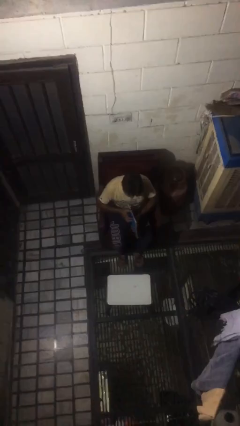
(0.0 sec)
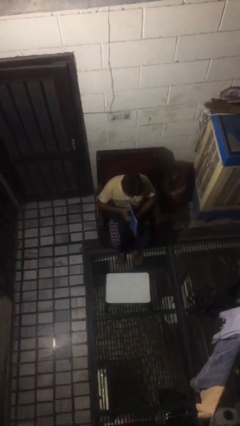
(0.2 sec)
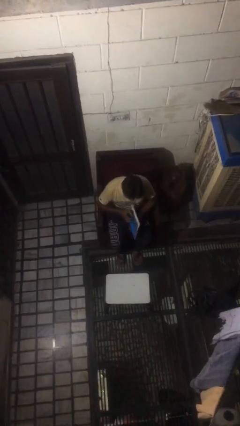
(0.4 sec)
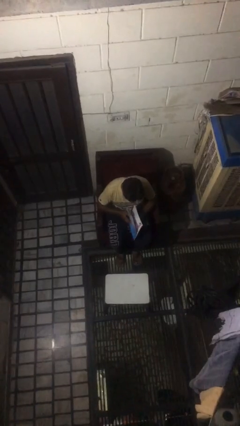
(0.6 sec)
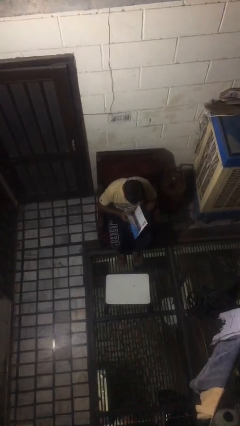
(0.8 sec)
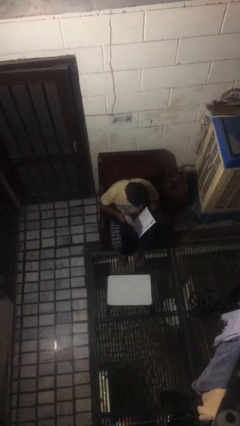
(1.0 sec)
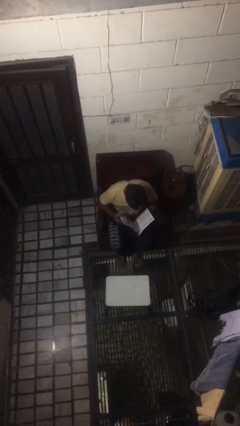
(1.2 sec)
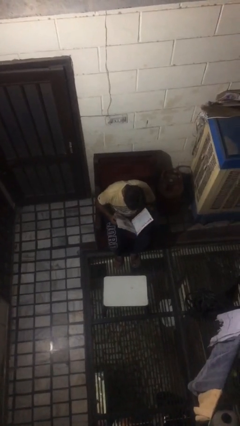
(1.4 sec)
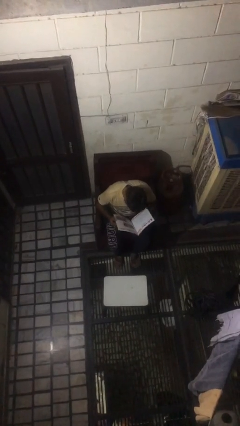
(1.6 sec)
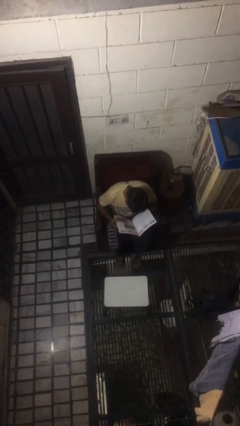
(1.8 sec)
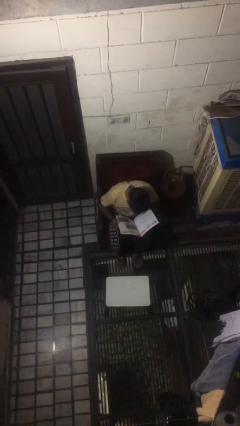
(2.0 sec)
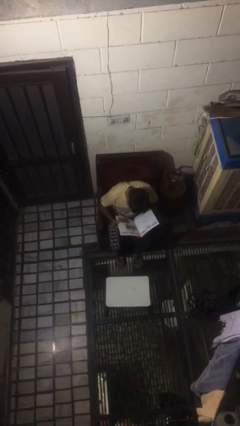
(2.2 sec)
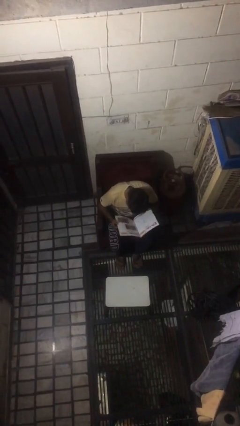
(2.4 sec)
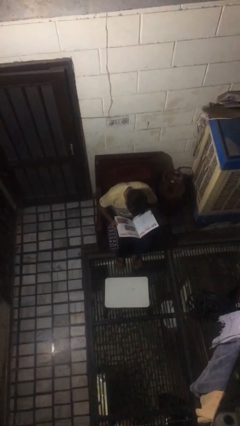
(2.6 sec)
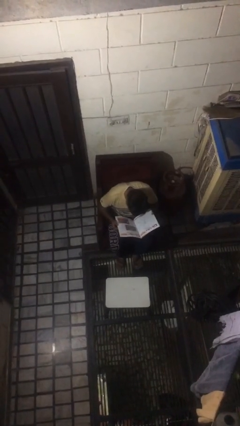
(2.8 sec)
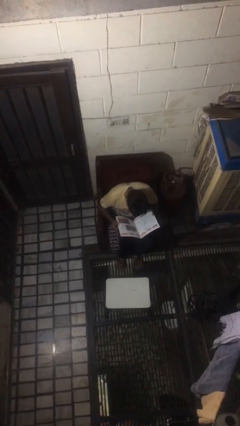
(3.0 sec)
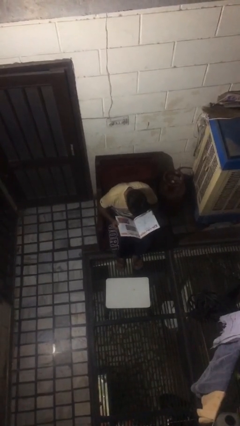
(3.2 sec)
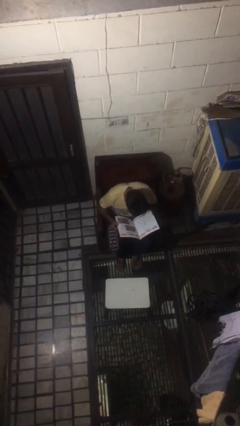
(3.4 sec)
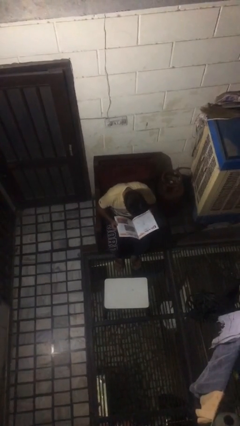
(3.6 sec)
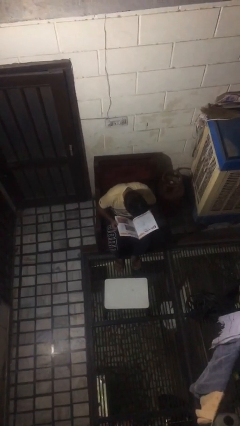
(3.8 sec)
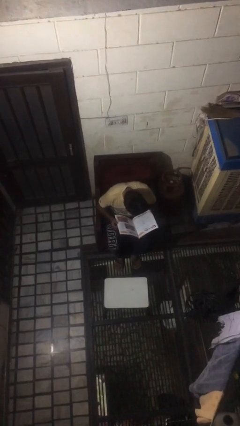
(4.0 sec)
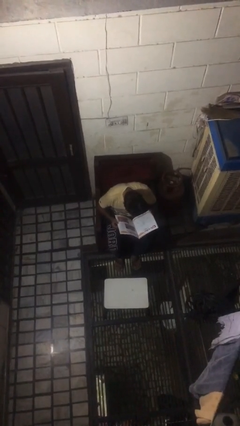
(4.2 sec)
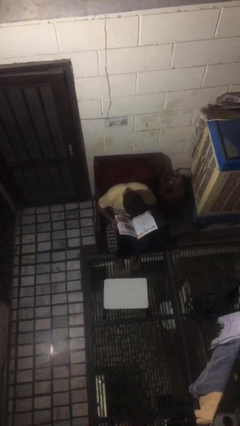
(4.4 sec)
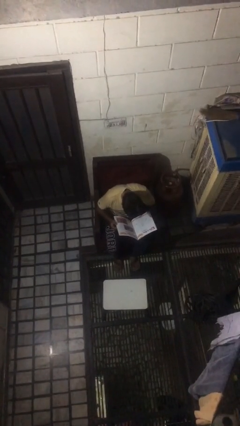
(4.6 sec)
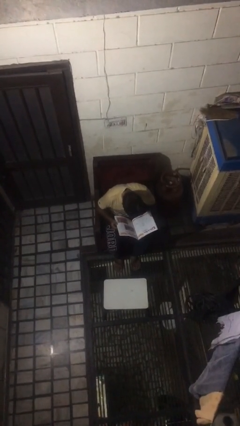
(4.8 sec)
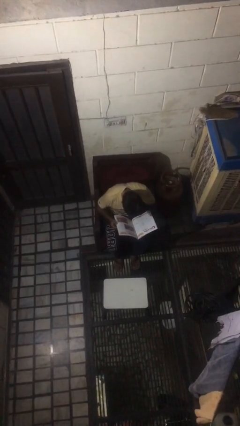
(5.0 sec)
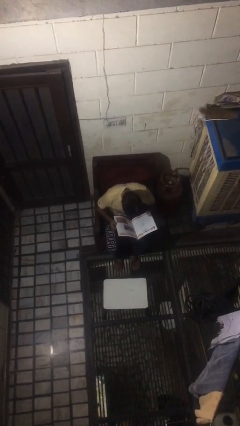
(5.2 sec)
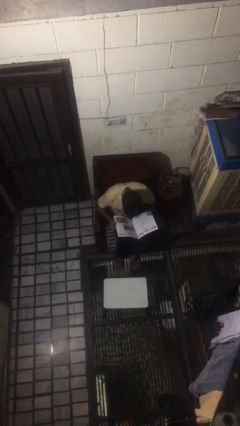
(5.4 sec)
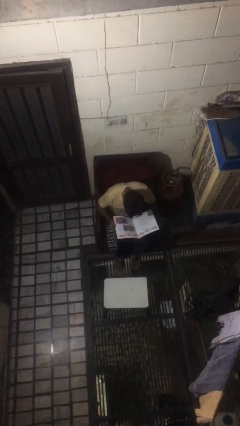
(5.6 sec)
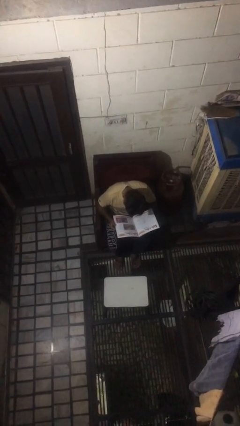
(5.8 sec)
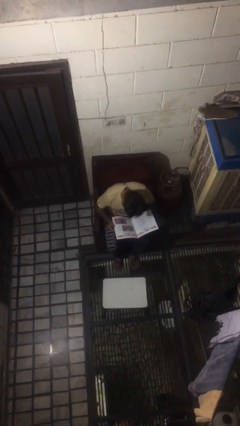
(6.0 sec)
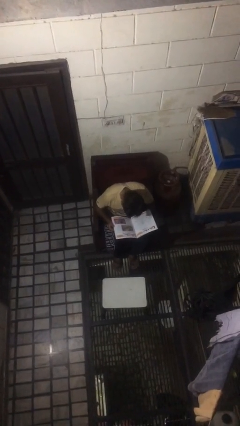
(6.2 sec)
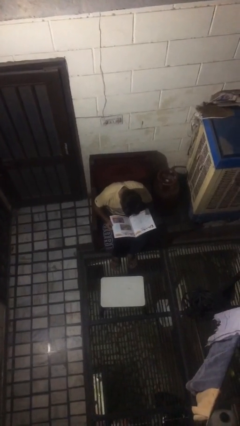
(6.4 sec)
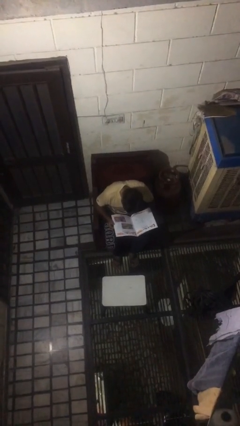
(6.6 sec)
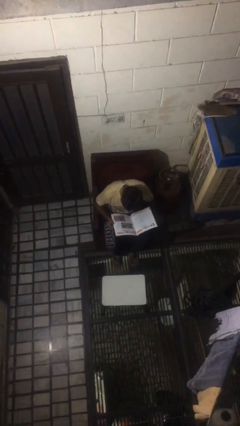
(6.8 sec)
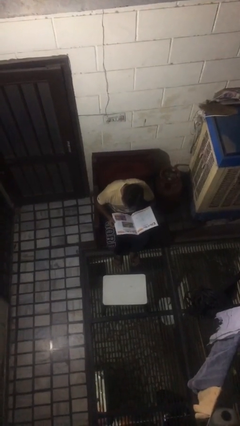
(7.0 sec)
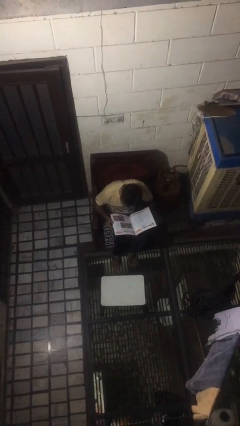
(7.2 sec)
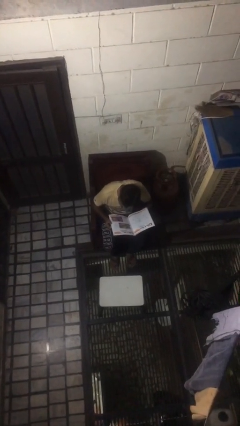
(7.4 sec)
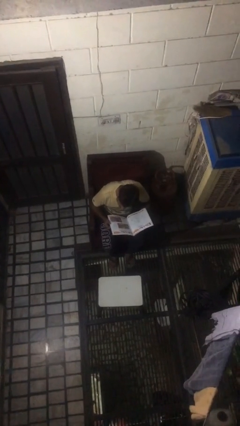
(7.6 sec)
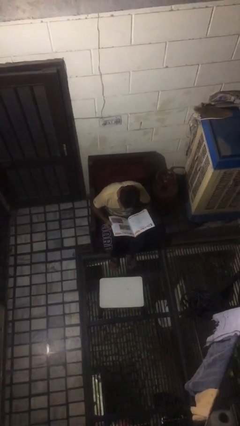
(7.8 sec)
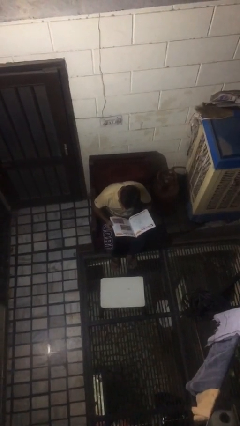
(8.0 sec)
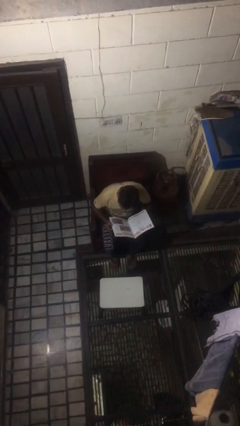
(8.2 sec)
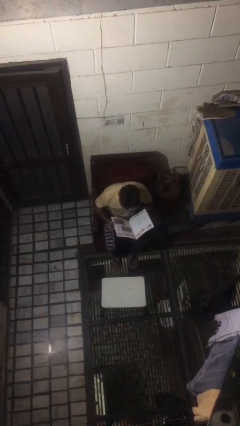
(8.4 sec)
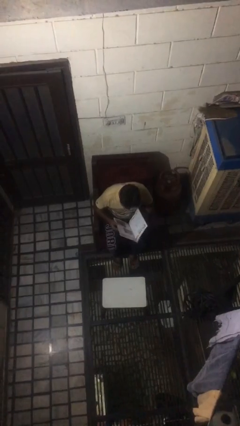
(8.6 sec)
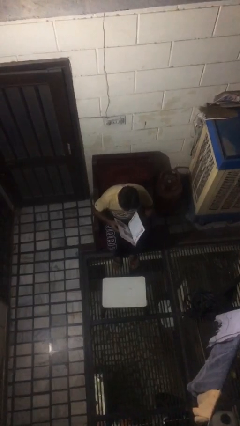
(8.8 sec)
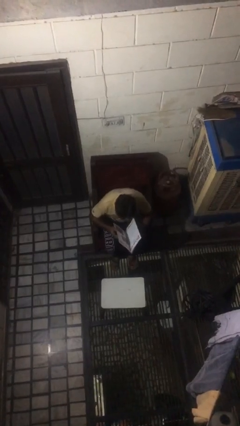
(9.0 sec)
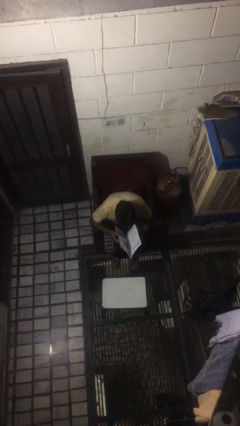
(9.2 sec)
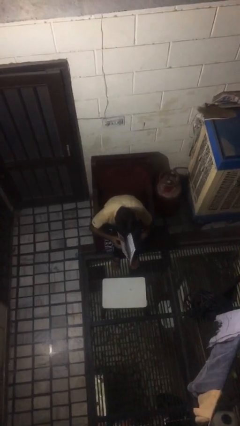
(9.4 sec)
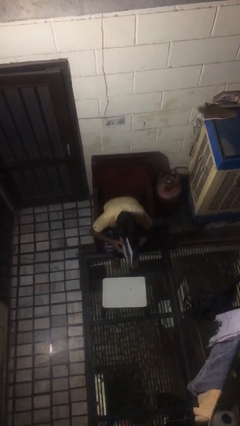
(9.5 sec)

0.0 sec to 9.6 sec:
person reads document

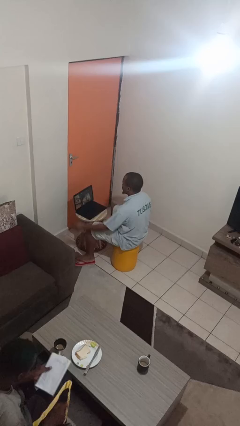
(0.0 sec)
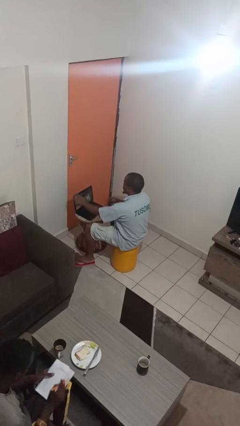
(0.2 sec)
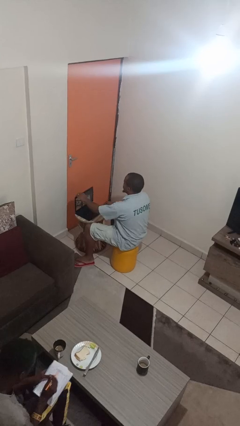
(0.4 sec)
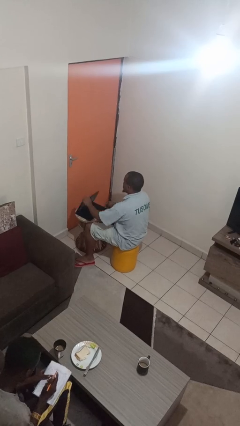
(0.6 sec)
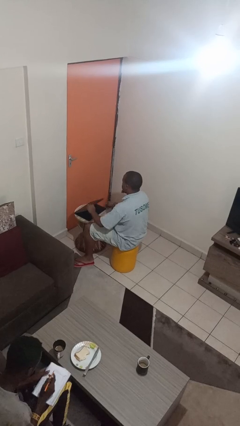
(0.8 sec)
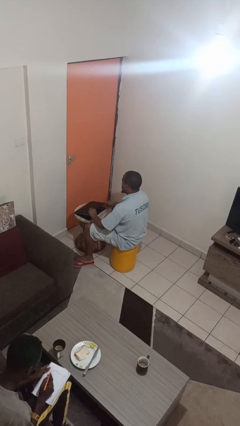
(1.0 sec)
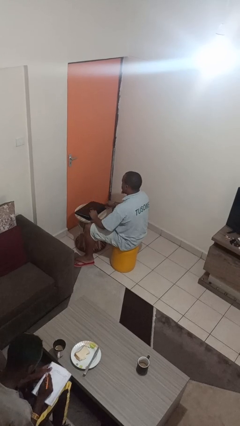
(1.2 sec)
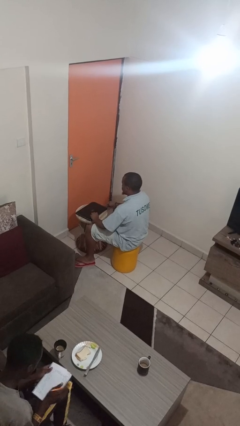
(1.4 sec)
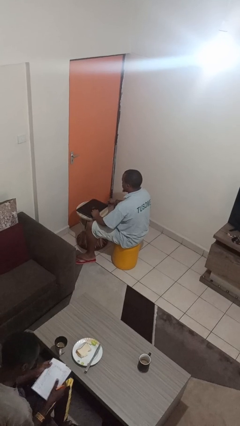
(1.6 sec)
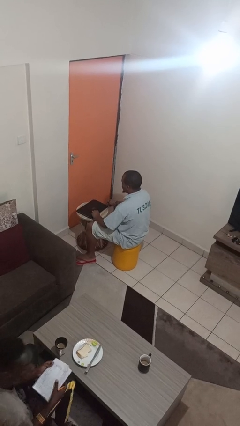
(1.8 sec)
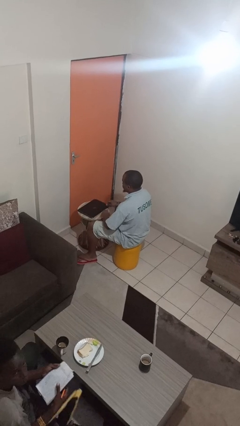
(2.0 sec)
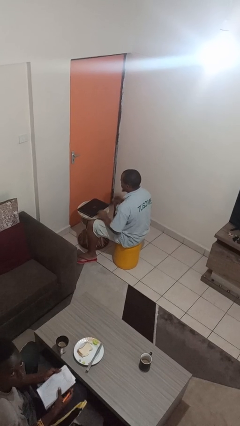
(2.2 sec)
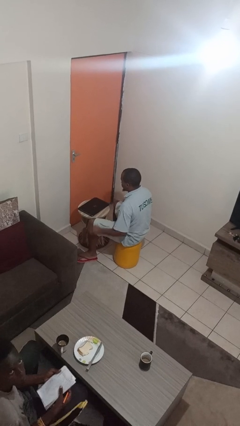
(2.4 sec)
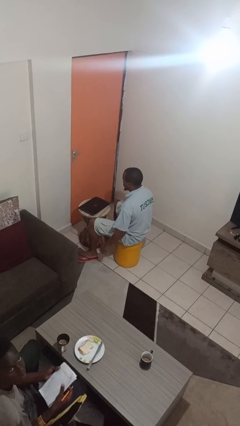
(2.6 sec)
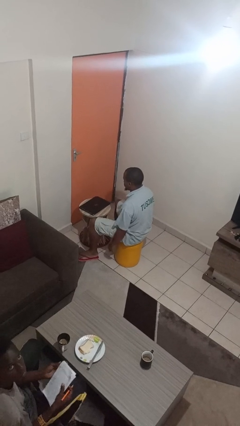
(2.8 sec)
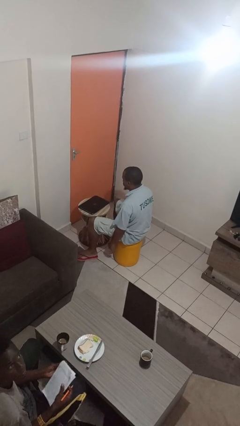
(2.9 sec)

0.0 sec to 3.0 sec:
person closes laptop

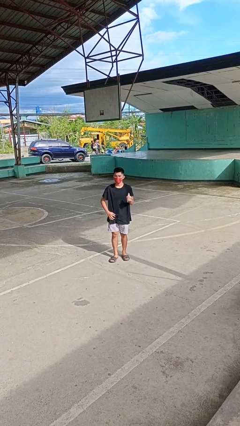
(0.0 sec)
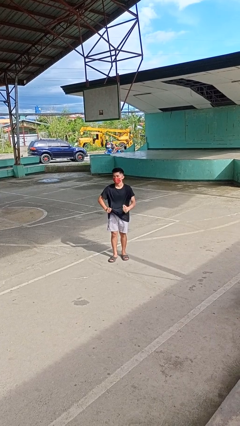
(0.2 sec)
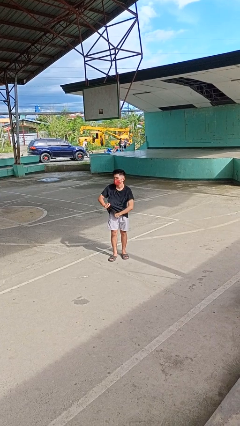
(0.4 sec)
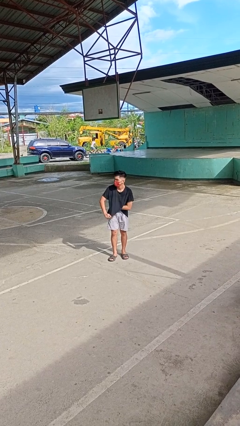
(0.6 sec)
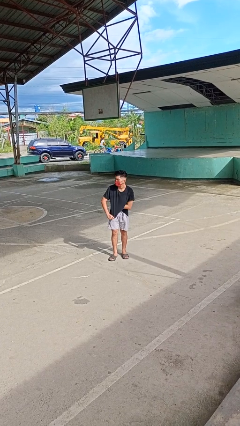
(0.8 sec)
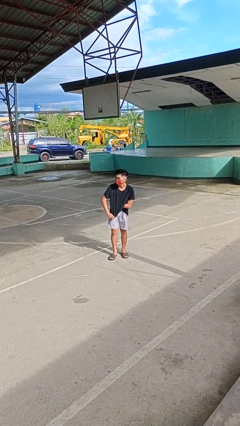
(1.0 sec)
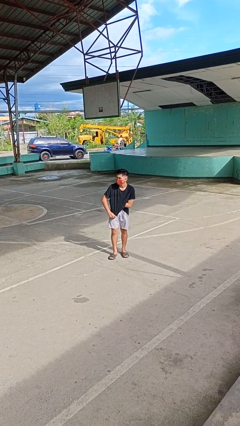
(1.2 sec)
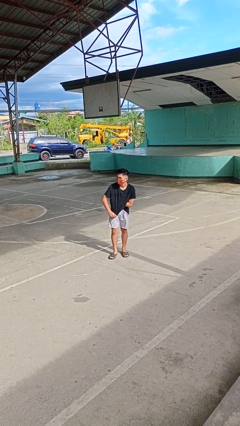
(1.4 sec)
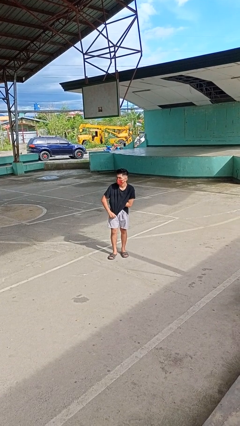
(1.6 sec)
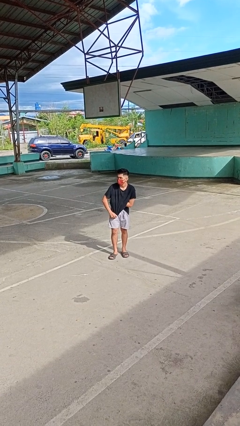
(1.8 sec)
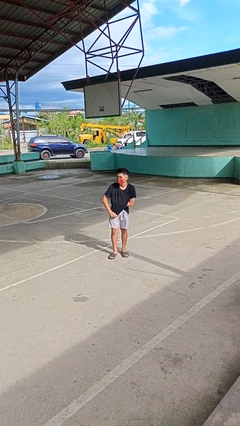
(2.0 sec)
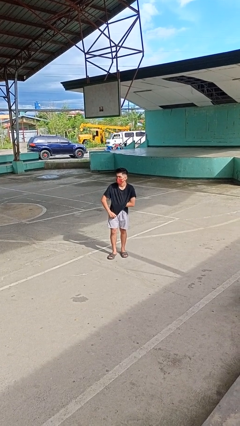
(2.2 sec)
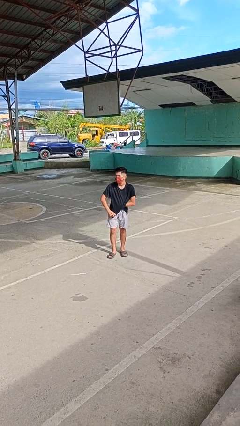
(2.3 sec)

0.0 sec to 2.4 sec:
person applies deodorant

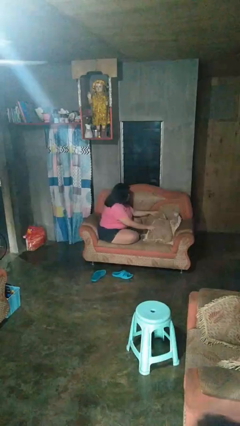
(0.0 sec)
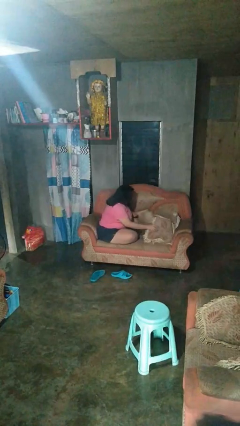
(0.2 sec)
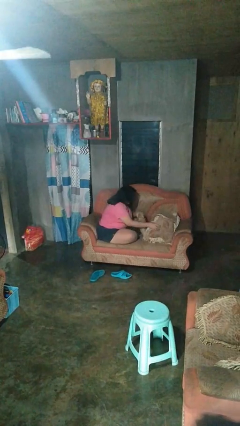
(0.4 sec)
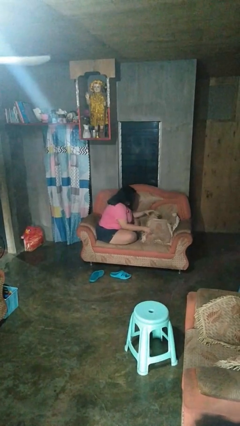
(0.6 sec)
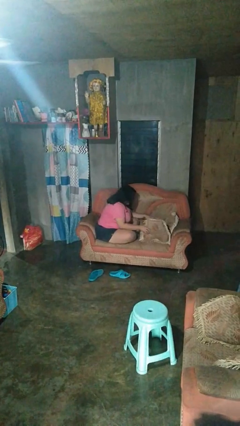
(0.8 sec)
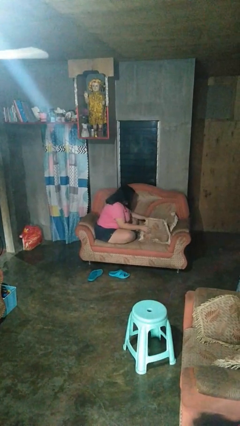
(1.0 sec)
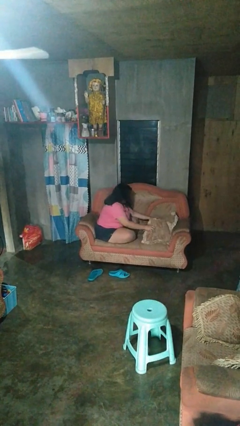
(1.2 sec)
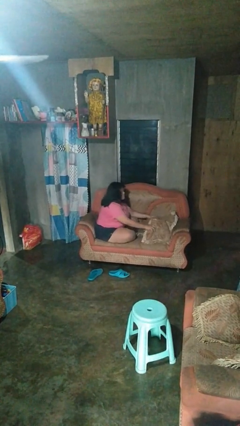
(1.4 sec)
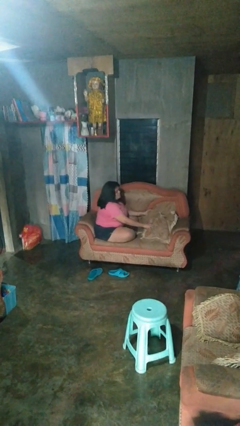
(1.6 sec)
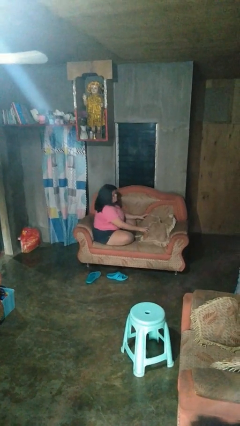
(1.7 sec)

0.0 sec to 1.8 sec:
person searches in couch

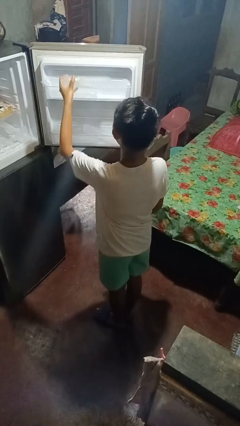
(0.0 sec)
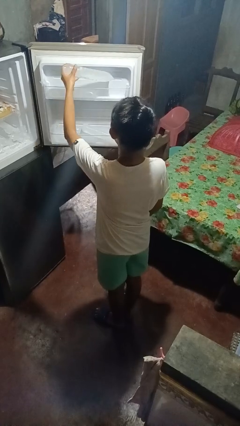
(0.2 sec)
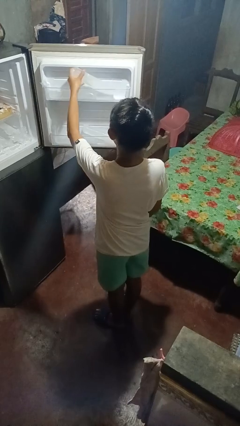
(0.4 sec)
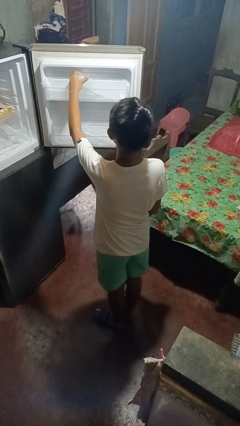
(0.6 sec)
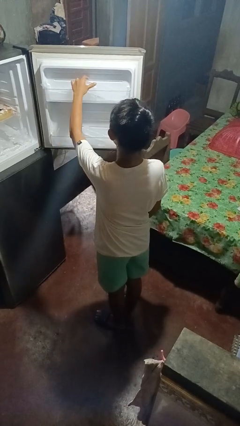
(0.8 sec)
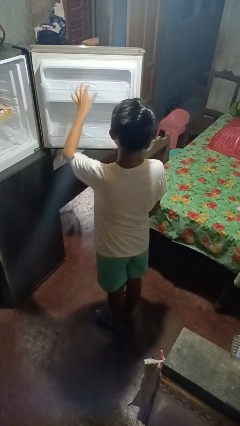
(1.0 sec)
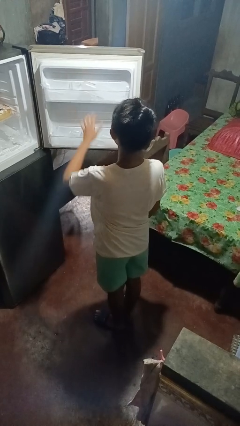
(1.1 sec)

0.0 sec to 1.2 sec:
person puts object into refrigerator
